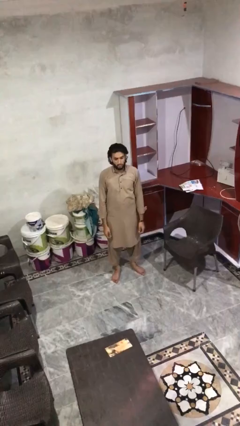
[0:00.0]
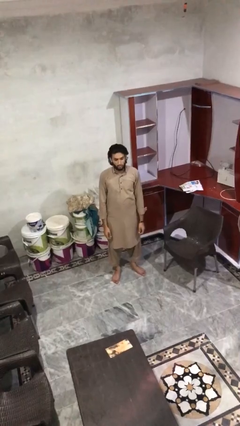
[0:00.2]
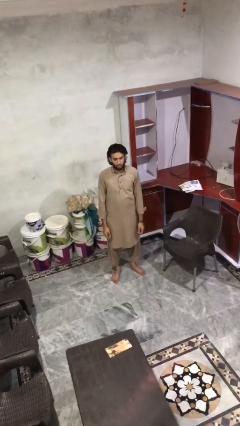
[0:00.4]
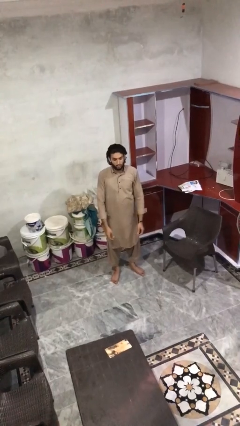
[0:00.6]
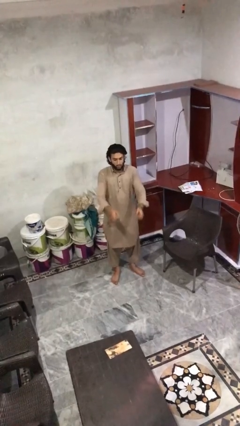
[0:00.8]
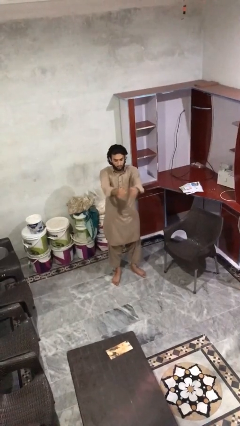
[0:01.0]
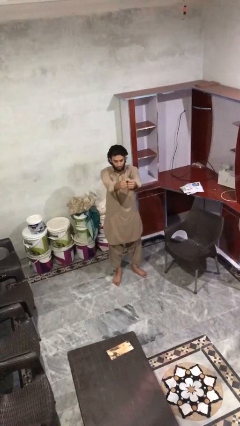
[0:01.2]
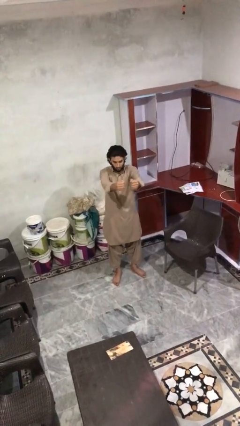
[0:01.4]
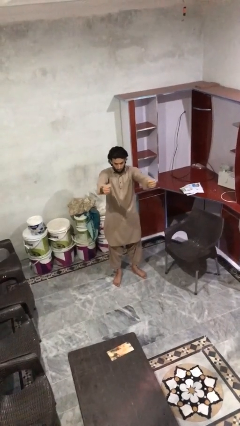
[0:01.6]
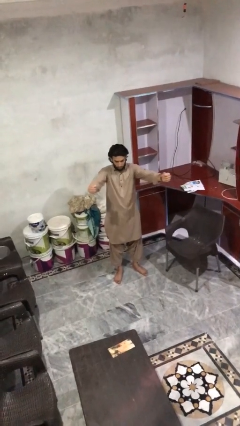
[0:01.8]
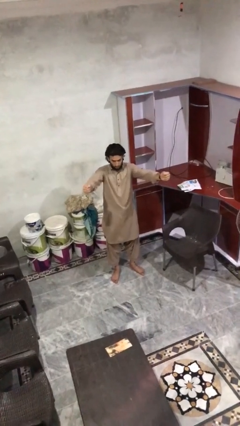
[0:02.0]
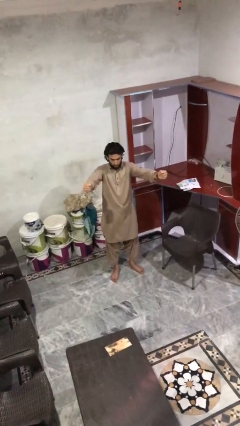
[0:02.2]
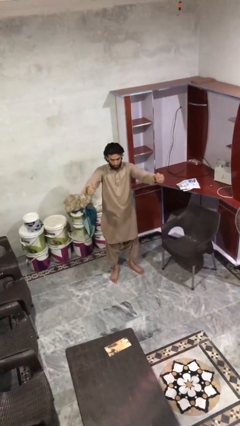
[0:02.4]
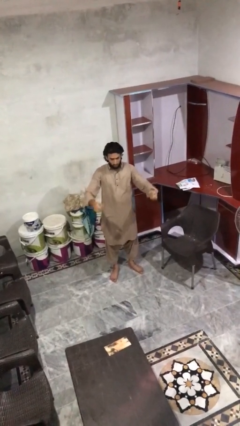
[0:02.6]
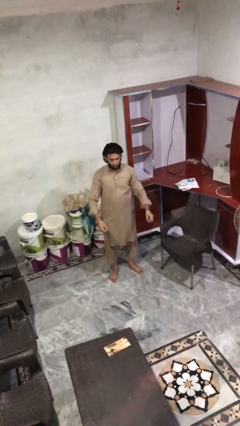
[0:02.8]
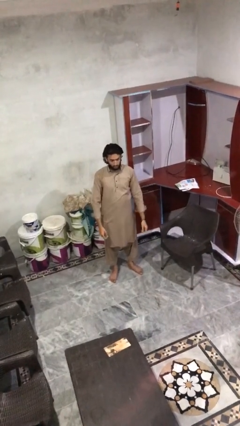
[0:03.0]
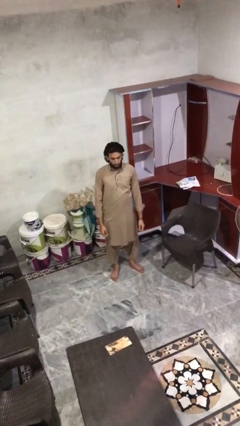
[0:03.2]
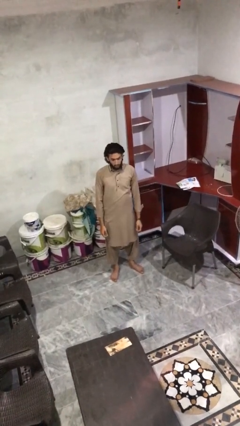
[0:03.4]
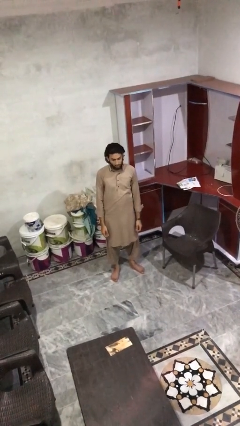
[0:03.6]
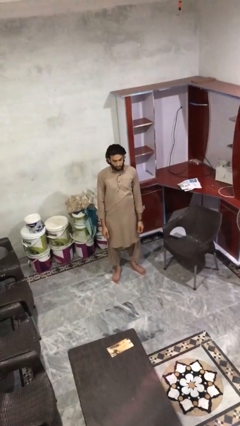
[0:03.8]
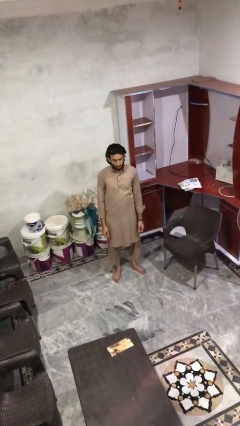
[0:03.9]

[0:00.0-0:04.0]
person gestures zoom in

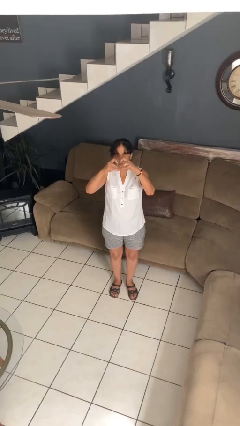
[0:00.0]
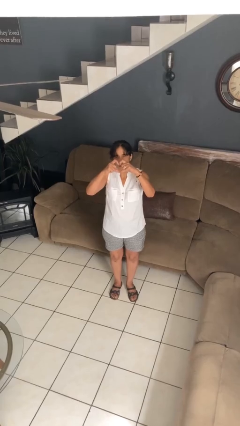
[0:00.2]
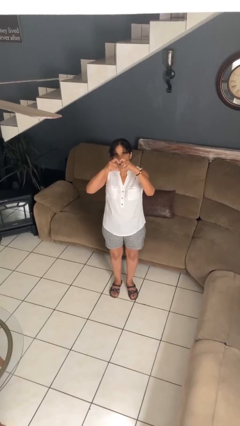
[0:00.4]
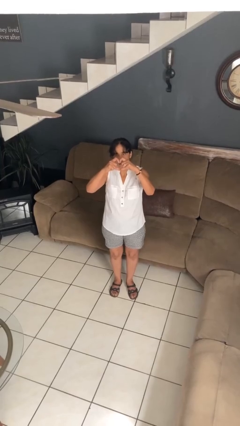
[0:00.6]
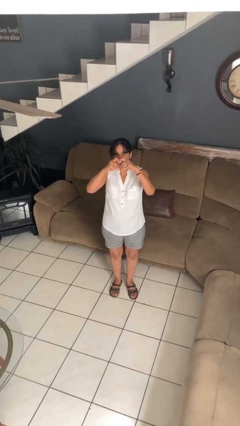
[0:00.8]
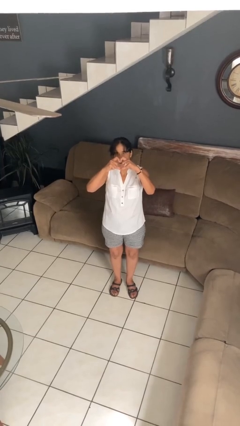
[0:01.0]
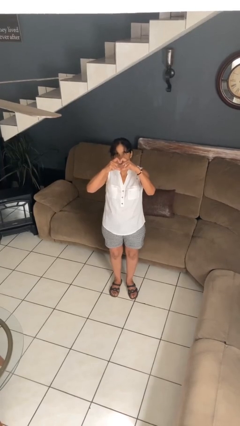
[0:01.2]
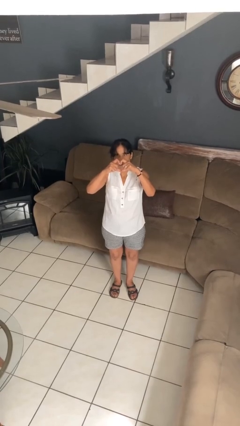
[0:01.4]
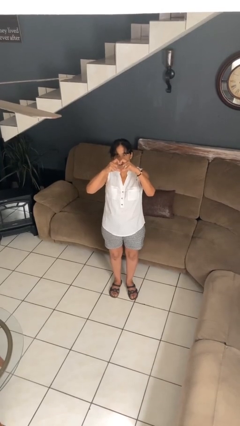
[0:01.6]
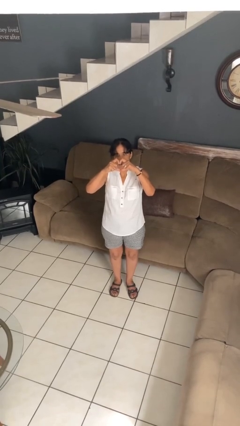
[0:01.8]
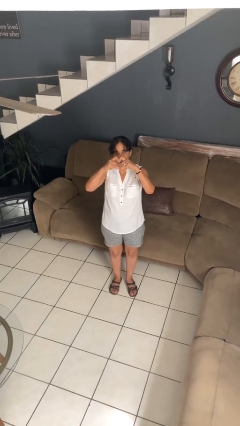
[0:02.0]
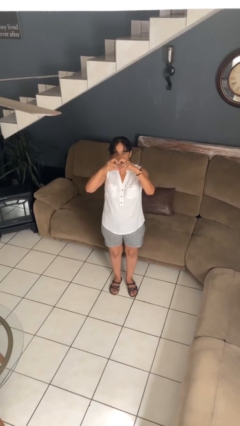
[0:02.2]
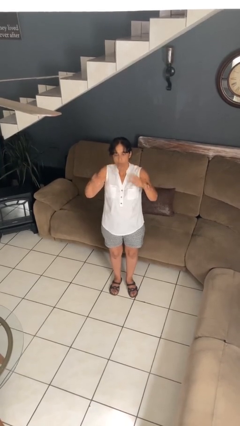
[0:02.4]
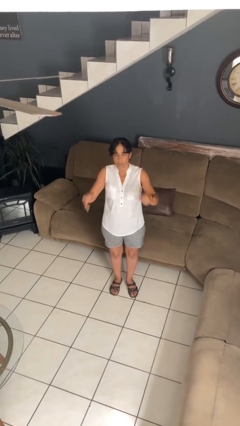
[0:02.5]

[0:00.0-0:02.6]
person gestures heart

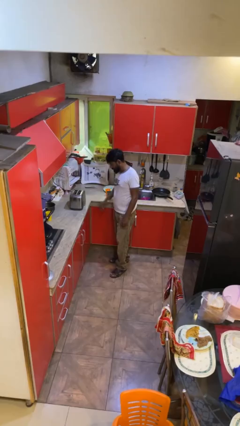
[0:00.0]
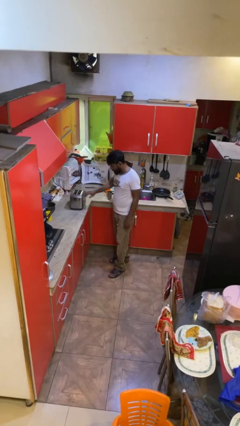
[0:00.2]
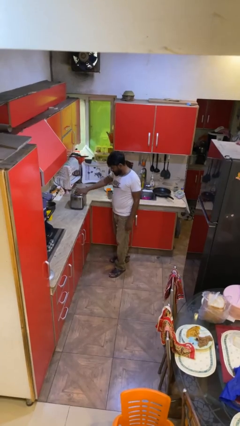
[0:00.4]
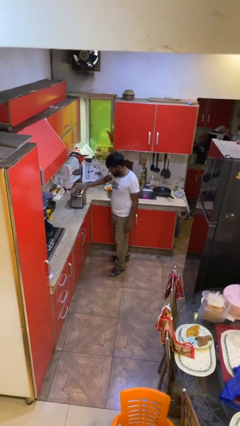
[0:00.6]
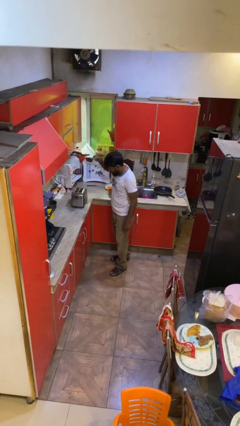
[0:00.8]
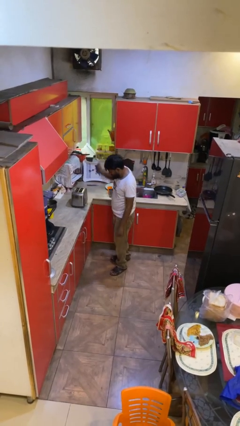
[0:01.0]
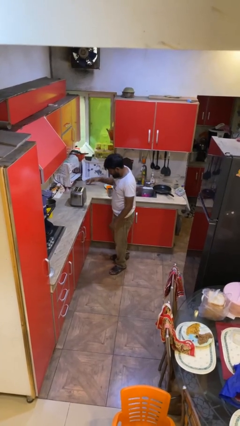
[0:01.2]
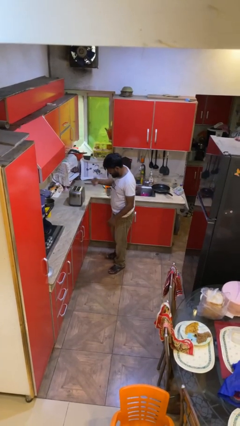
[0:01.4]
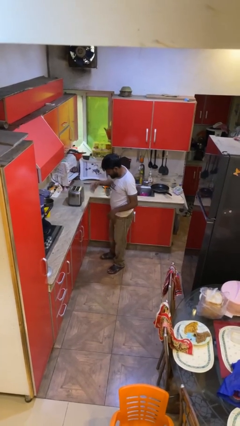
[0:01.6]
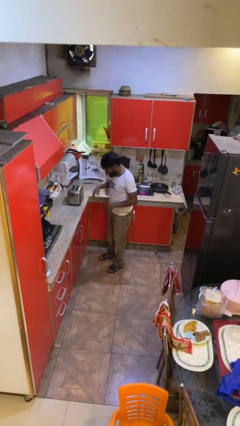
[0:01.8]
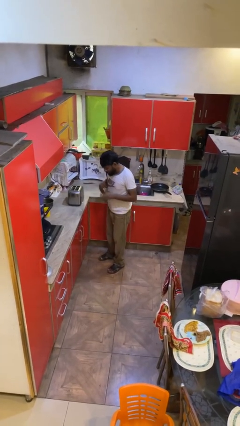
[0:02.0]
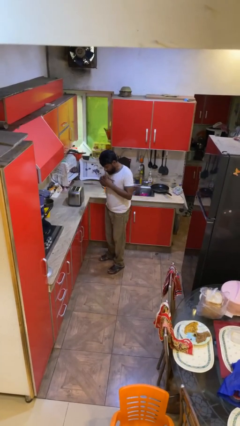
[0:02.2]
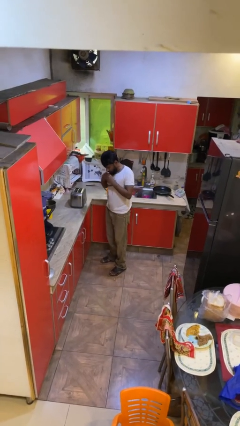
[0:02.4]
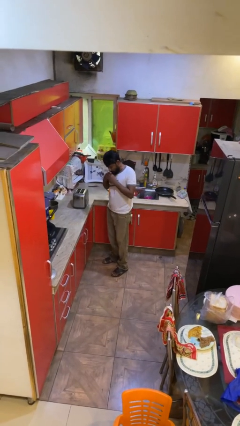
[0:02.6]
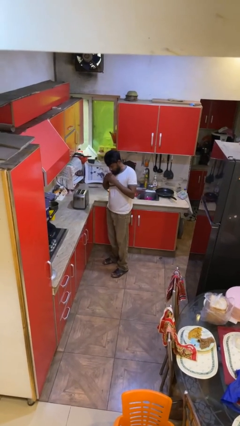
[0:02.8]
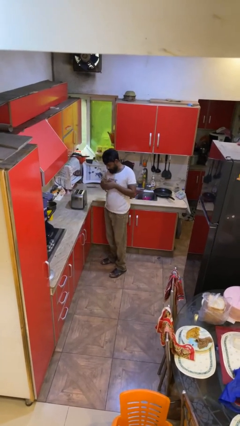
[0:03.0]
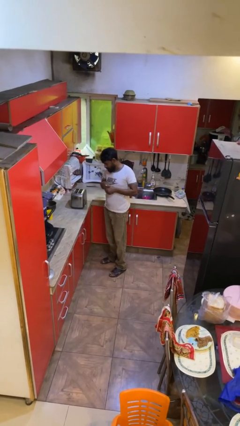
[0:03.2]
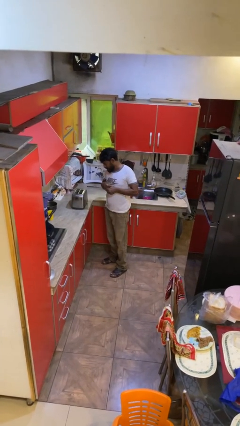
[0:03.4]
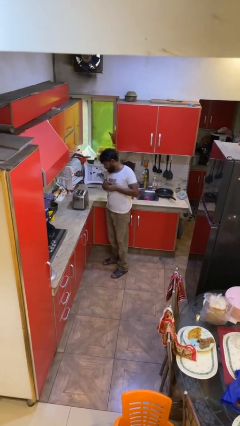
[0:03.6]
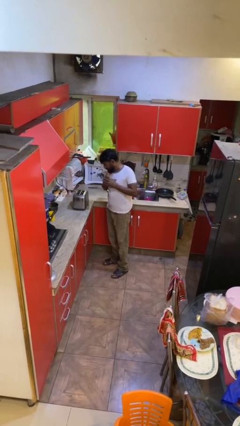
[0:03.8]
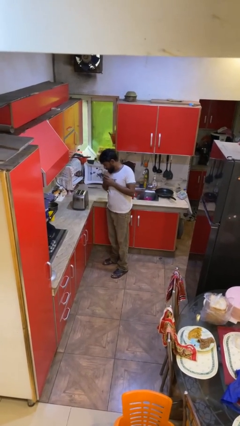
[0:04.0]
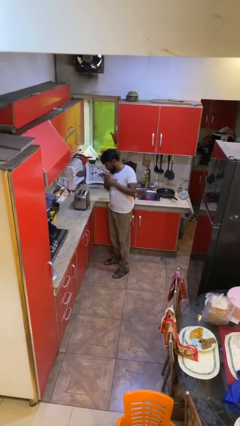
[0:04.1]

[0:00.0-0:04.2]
person burns hand

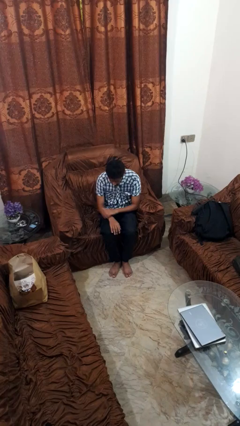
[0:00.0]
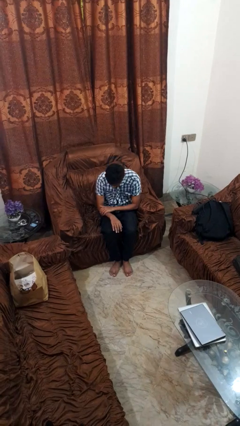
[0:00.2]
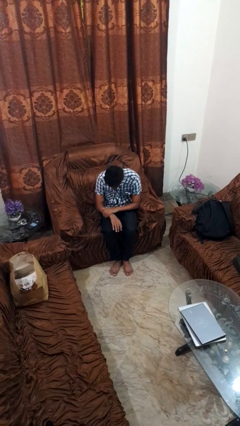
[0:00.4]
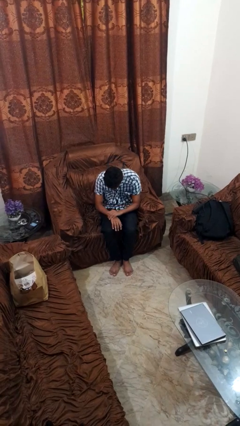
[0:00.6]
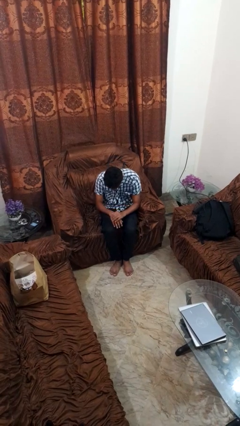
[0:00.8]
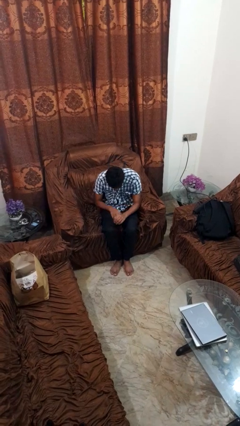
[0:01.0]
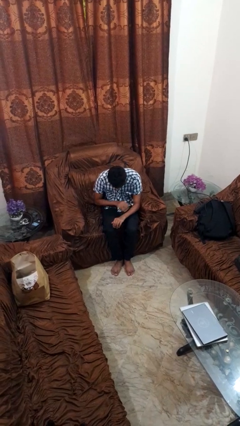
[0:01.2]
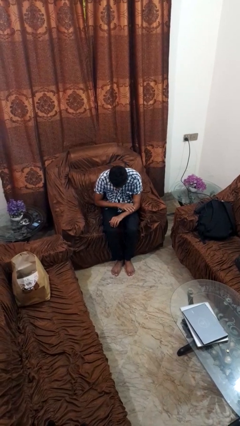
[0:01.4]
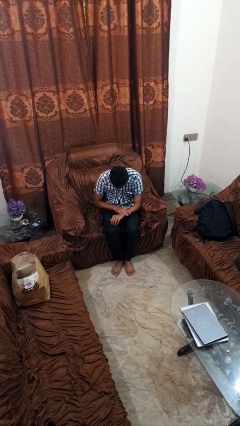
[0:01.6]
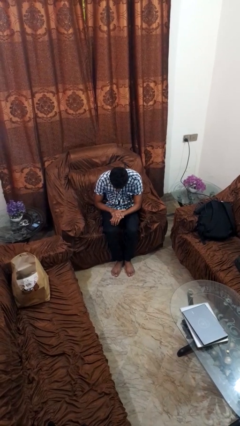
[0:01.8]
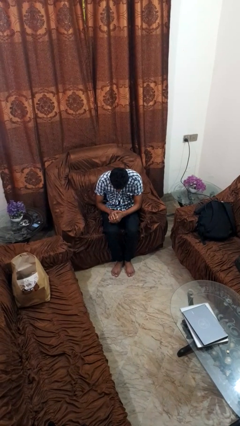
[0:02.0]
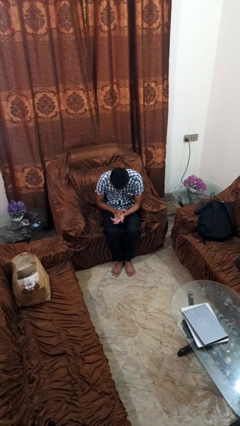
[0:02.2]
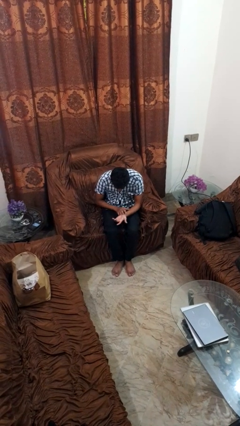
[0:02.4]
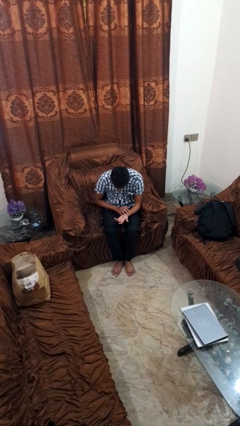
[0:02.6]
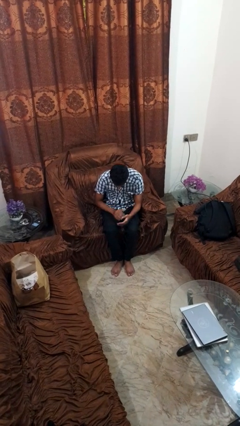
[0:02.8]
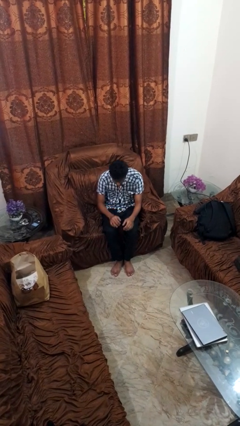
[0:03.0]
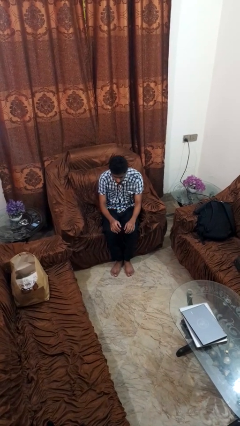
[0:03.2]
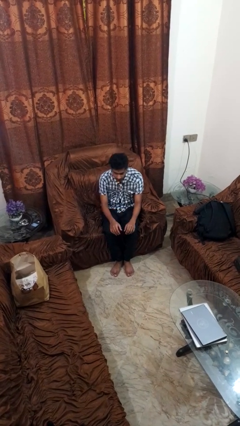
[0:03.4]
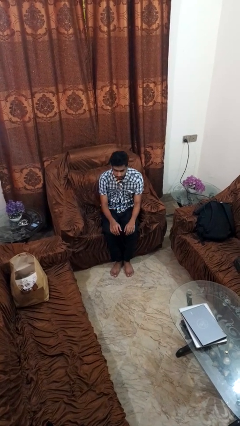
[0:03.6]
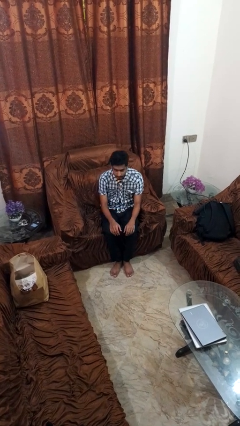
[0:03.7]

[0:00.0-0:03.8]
person looks at hands in lap

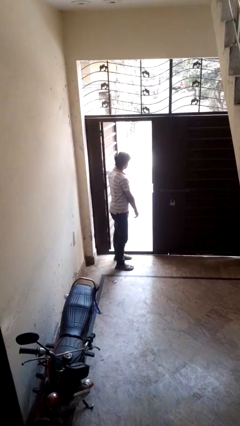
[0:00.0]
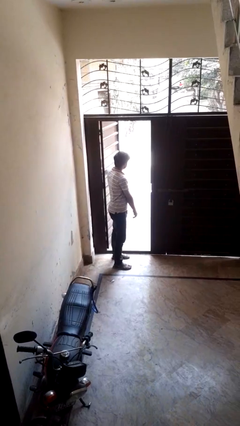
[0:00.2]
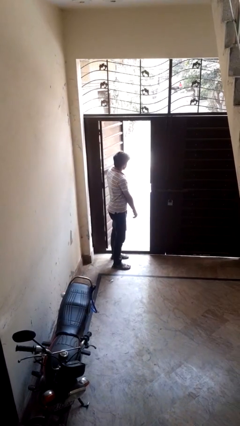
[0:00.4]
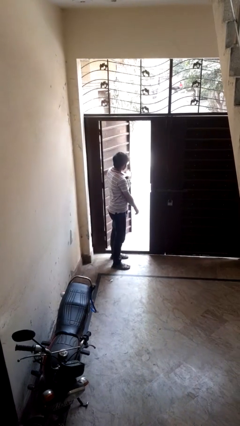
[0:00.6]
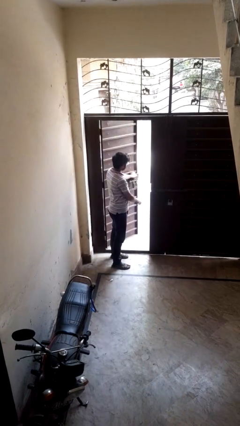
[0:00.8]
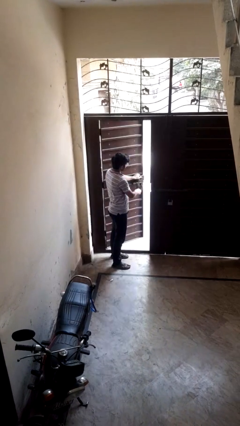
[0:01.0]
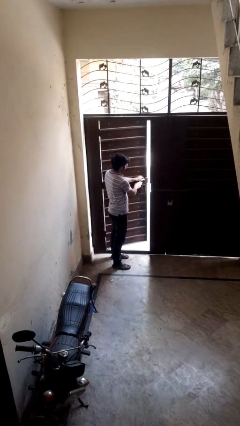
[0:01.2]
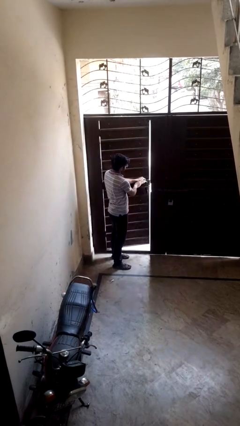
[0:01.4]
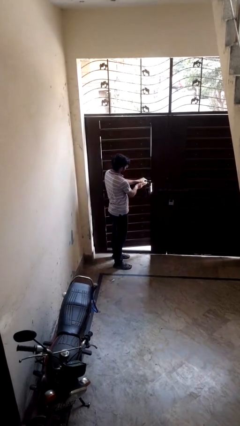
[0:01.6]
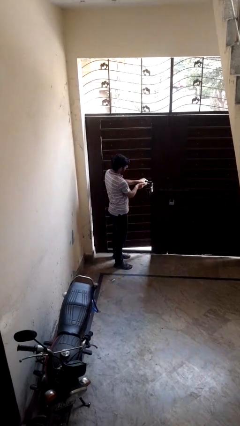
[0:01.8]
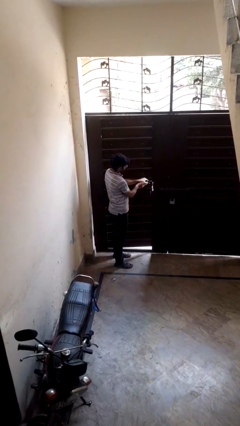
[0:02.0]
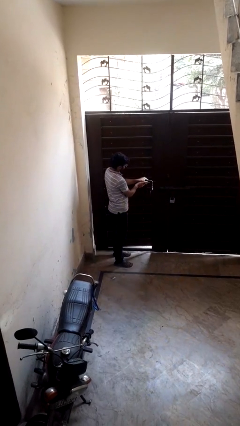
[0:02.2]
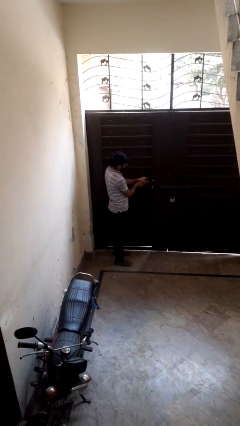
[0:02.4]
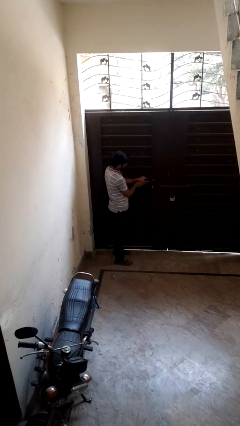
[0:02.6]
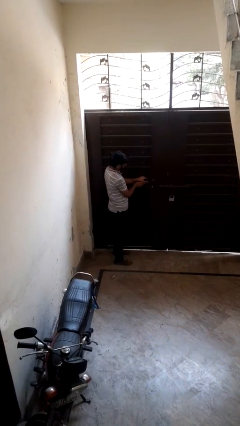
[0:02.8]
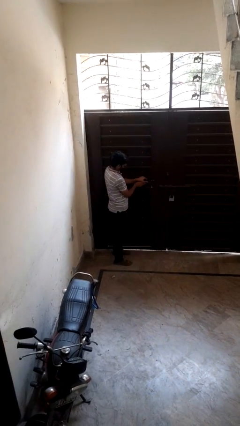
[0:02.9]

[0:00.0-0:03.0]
person closes facility door
